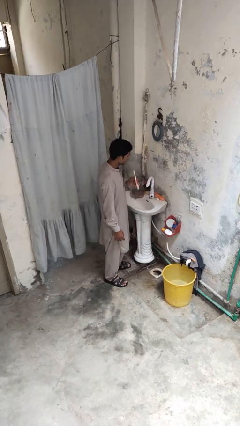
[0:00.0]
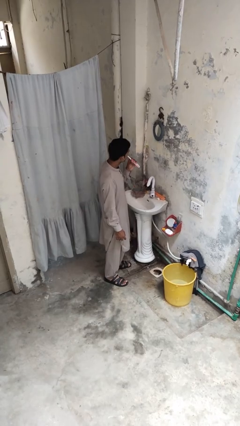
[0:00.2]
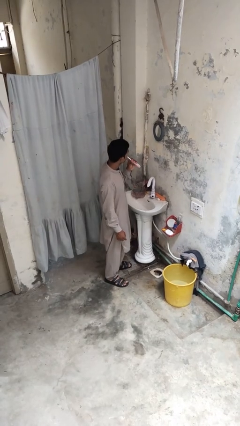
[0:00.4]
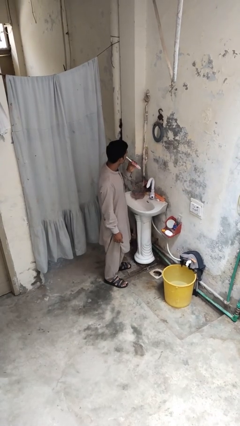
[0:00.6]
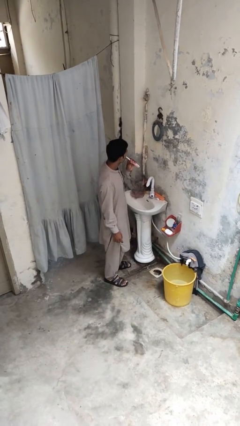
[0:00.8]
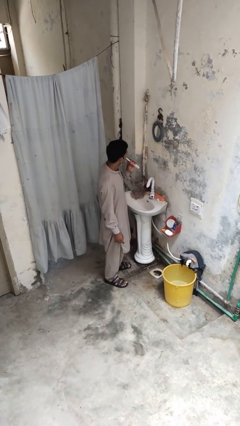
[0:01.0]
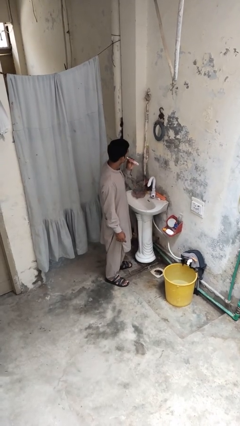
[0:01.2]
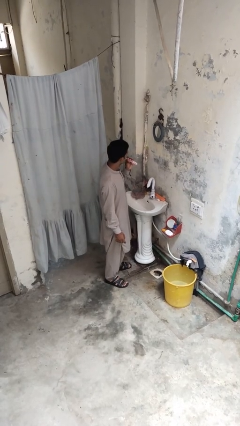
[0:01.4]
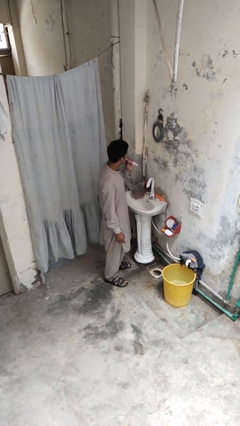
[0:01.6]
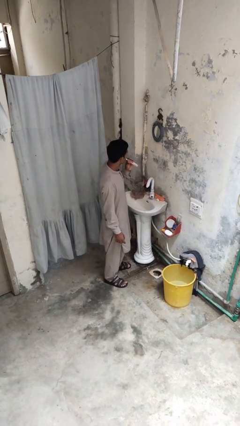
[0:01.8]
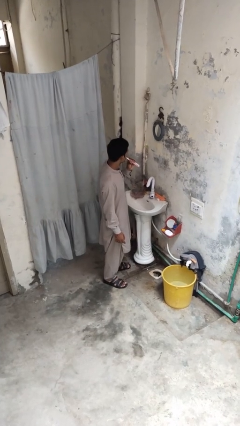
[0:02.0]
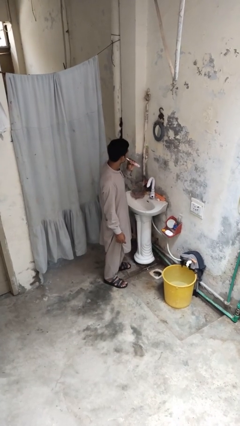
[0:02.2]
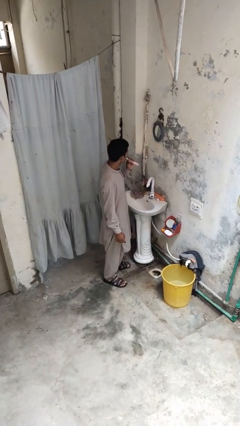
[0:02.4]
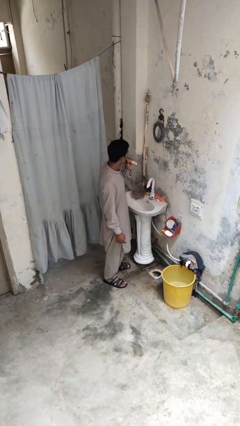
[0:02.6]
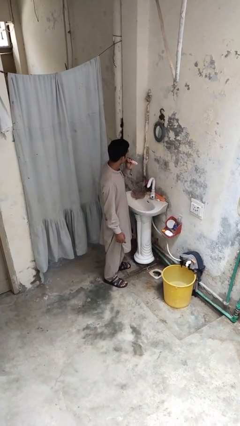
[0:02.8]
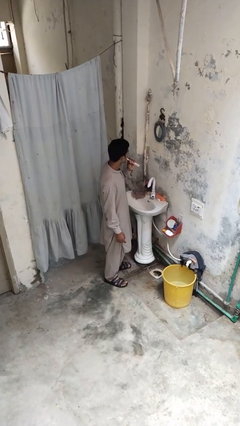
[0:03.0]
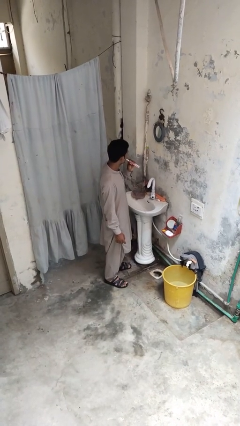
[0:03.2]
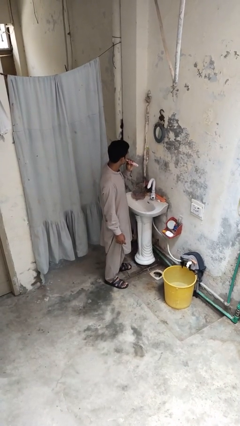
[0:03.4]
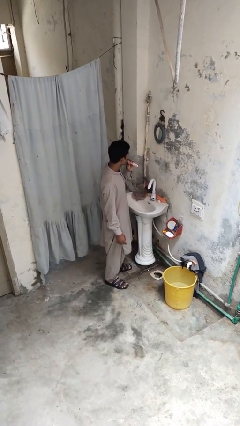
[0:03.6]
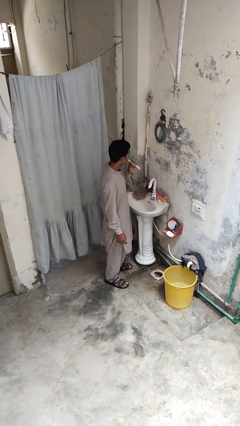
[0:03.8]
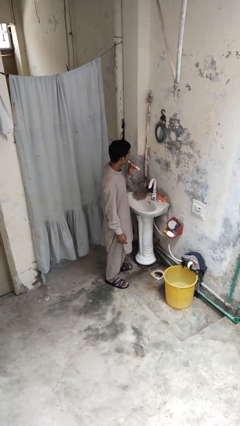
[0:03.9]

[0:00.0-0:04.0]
person brushes teeth

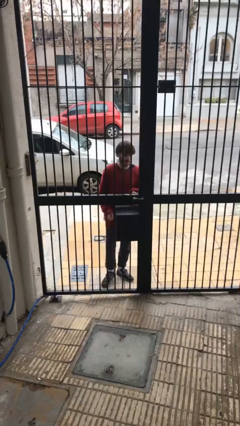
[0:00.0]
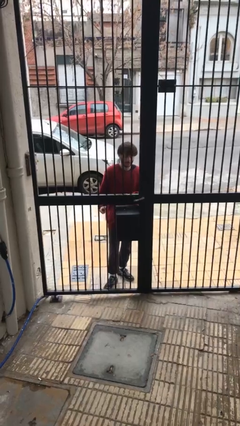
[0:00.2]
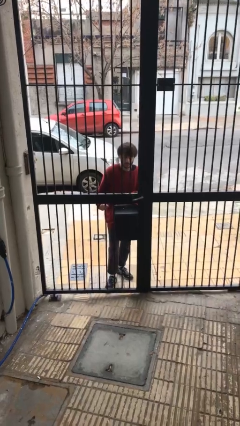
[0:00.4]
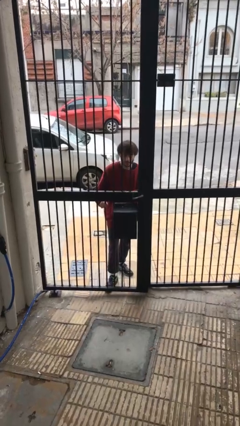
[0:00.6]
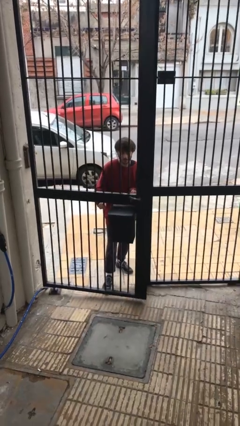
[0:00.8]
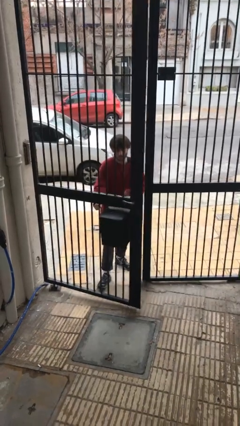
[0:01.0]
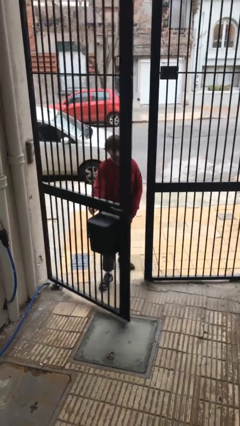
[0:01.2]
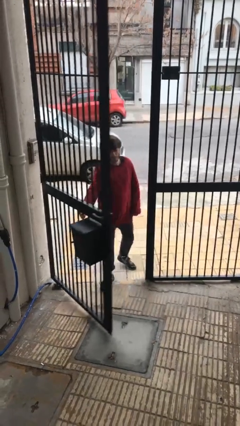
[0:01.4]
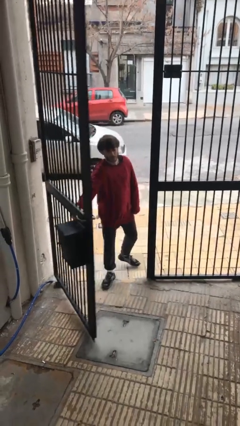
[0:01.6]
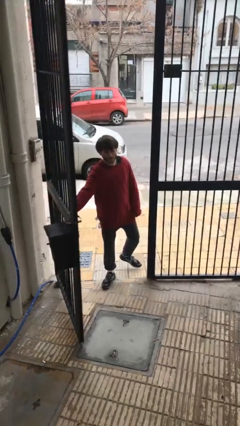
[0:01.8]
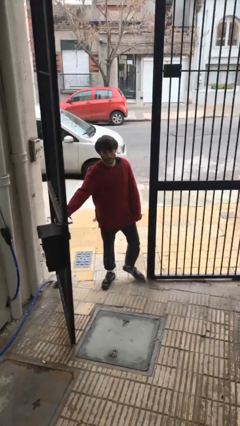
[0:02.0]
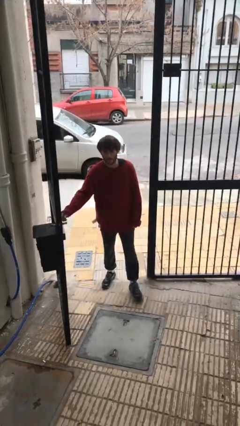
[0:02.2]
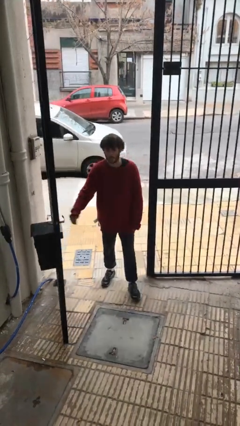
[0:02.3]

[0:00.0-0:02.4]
person opens gate

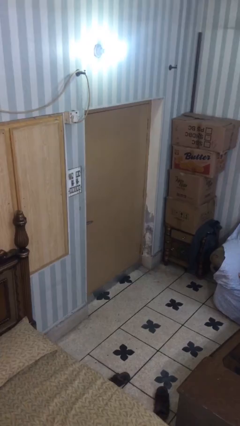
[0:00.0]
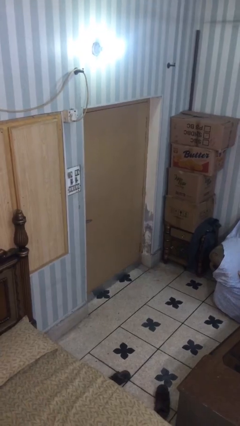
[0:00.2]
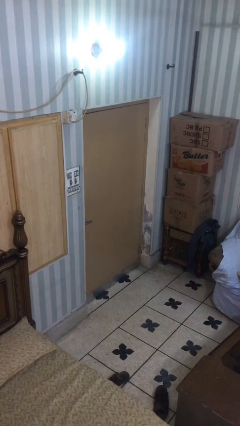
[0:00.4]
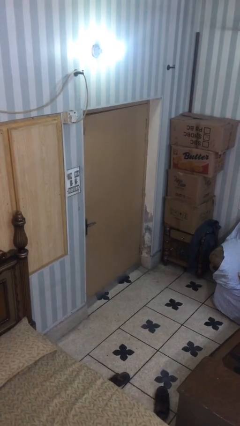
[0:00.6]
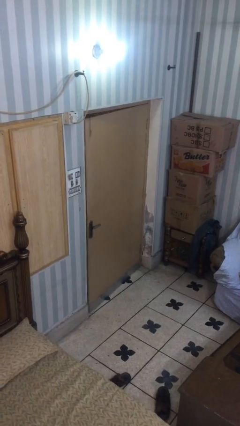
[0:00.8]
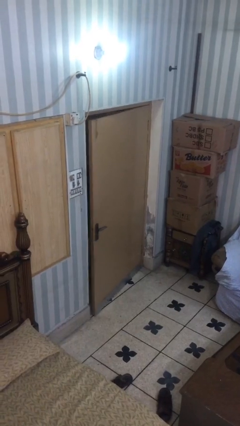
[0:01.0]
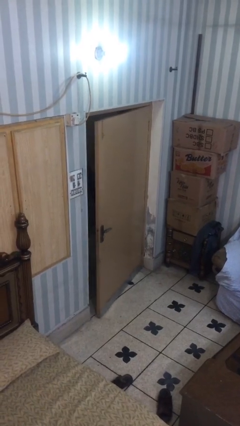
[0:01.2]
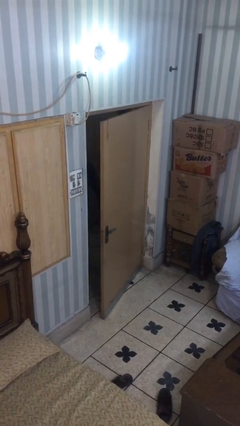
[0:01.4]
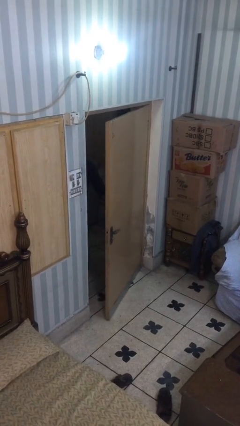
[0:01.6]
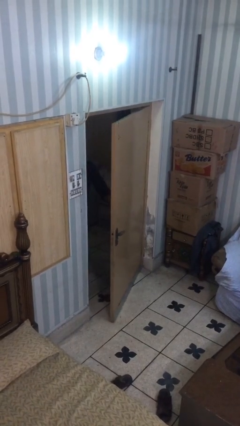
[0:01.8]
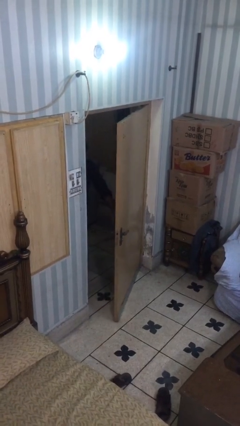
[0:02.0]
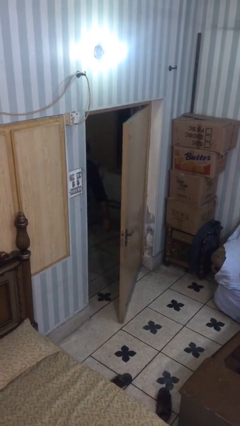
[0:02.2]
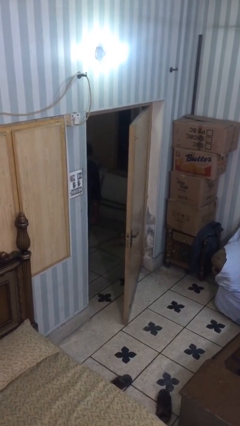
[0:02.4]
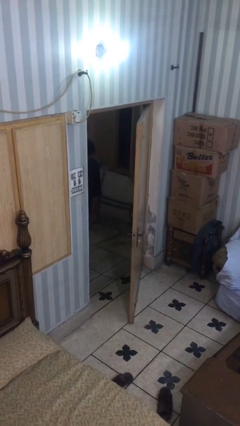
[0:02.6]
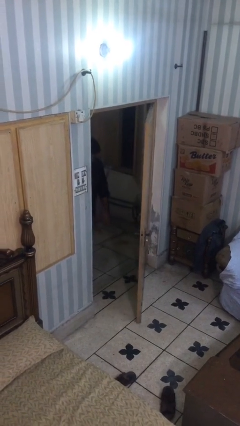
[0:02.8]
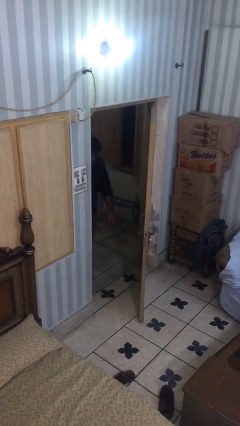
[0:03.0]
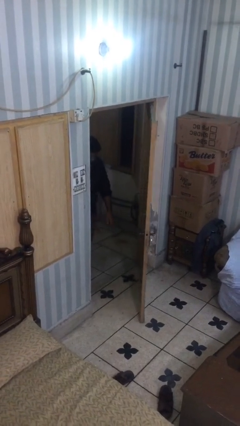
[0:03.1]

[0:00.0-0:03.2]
person opens facility door

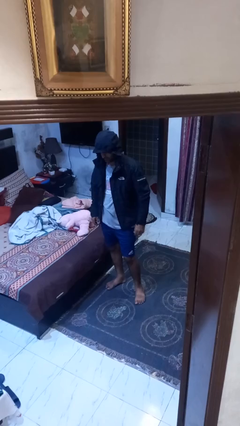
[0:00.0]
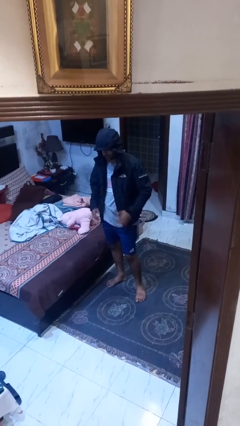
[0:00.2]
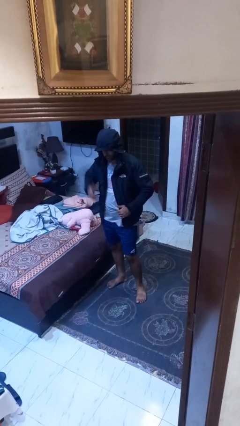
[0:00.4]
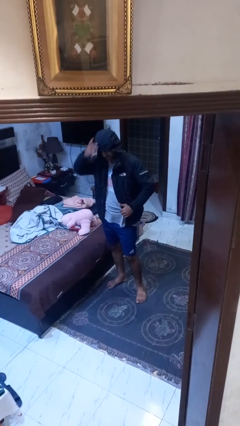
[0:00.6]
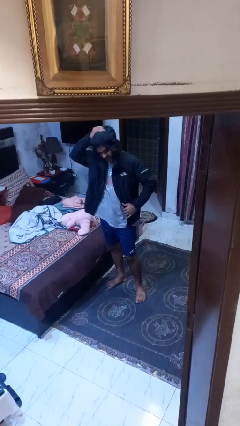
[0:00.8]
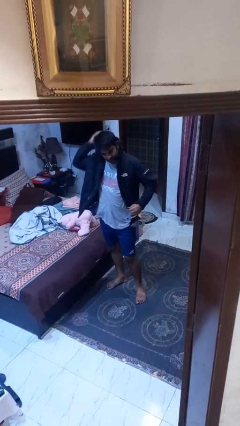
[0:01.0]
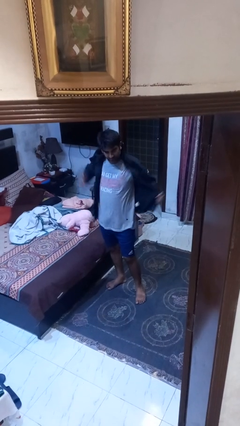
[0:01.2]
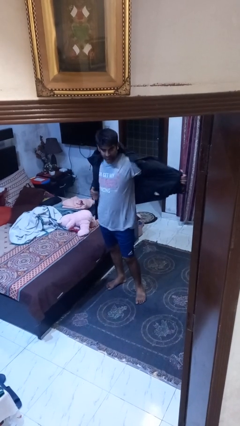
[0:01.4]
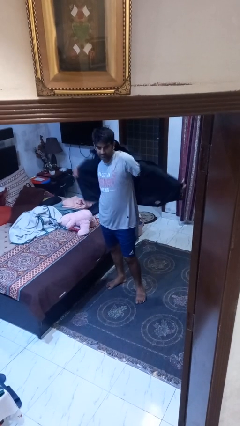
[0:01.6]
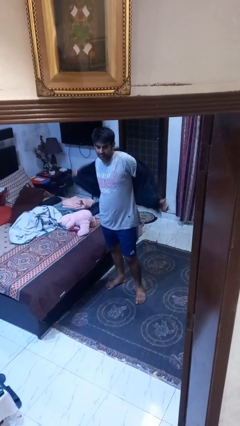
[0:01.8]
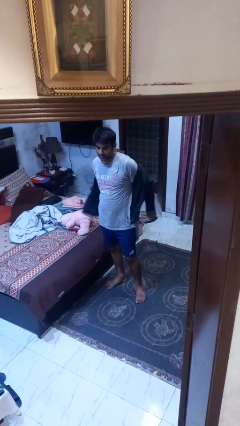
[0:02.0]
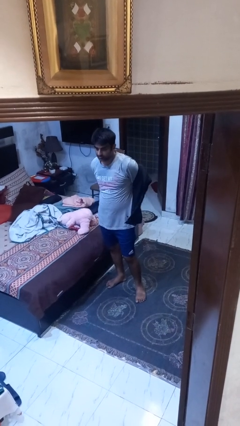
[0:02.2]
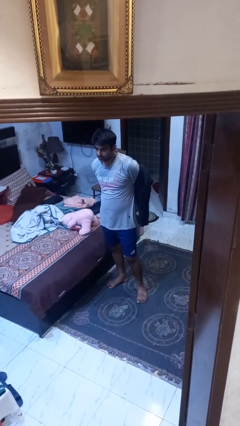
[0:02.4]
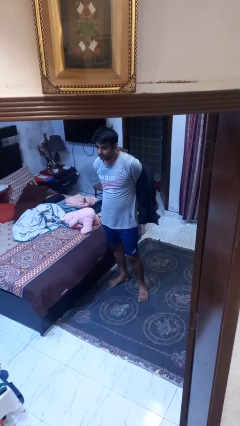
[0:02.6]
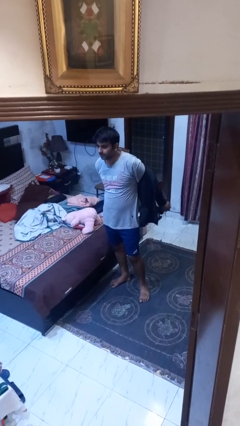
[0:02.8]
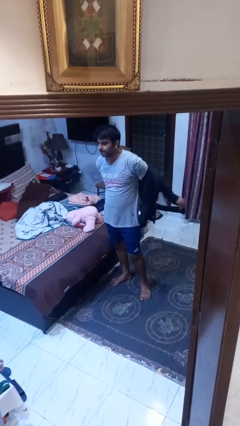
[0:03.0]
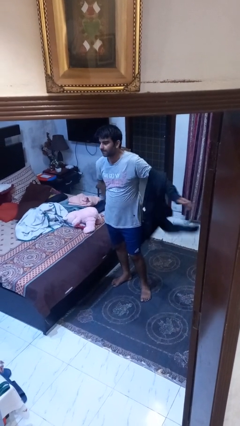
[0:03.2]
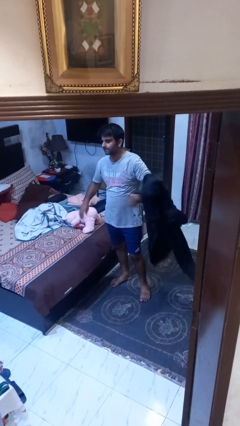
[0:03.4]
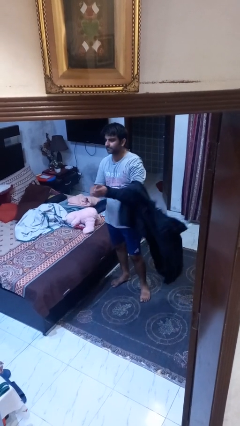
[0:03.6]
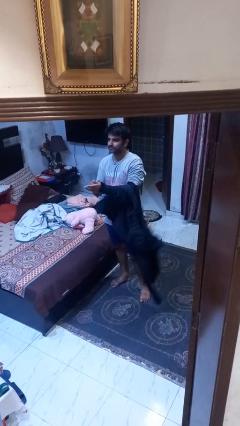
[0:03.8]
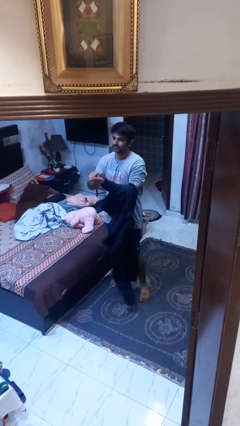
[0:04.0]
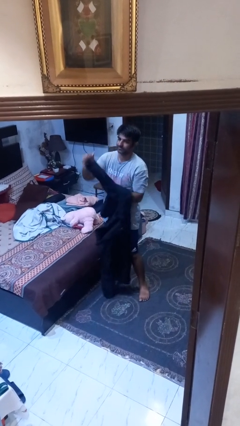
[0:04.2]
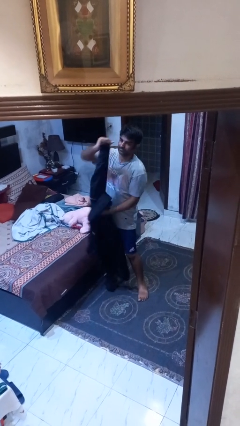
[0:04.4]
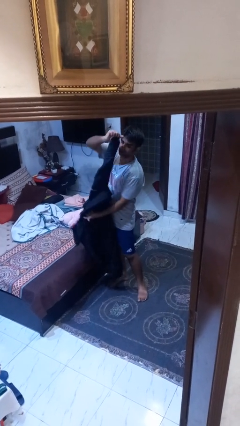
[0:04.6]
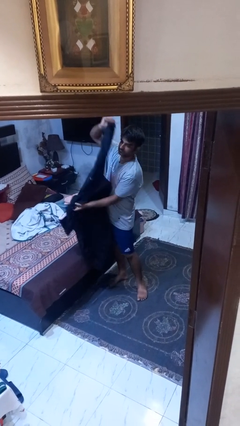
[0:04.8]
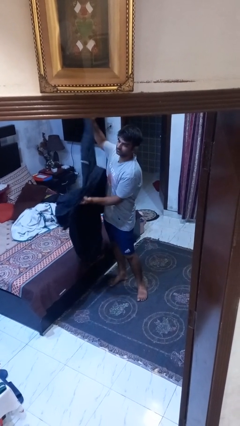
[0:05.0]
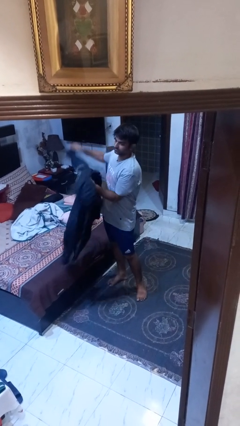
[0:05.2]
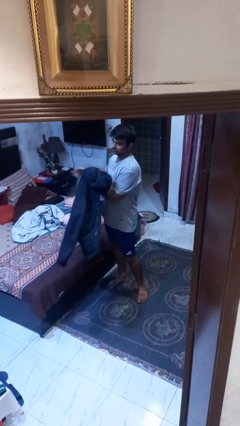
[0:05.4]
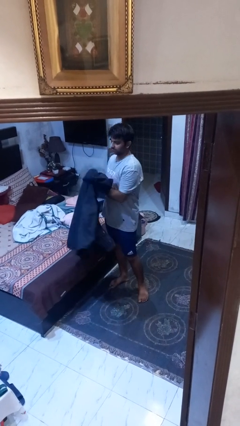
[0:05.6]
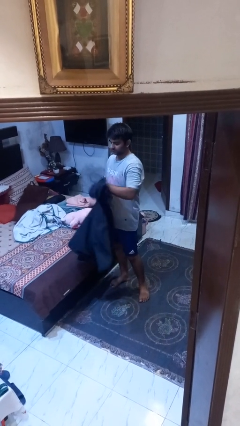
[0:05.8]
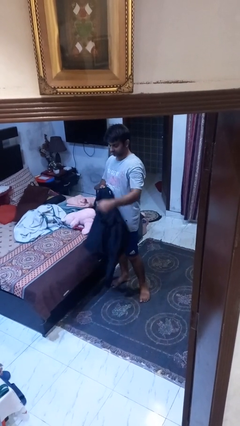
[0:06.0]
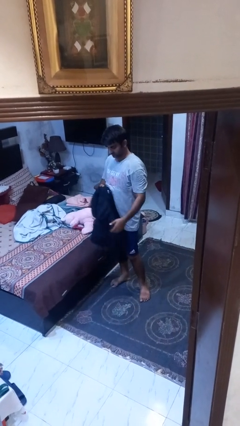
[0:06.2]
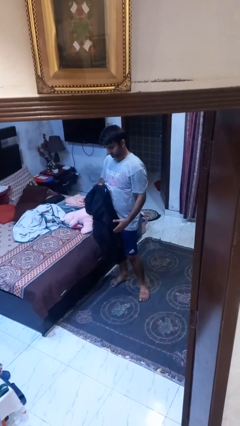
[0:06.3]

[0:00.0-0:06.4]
person takes off hoodie

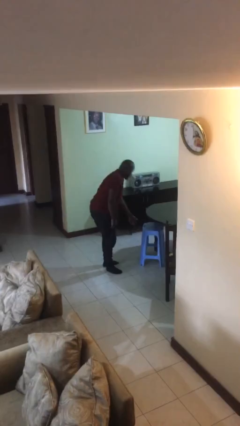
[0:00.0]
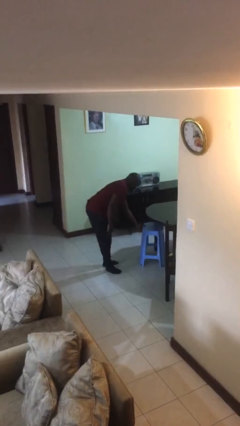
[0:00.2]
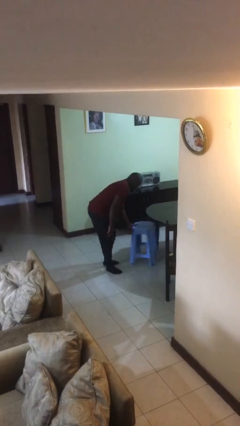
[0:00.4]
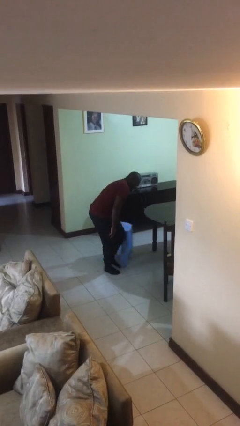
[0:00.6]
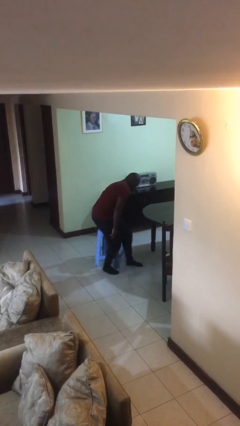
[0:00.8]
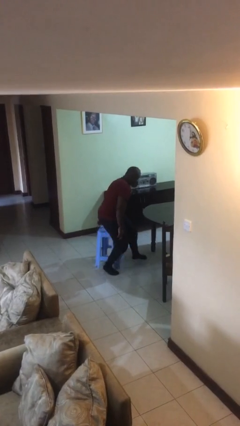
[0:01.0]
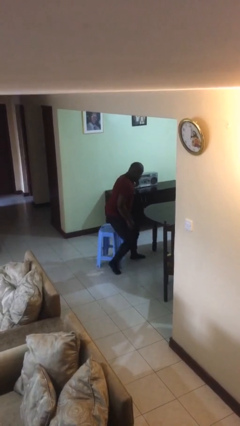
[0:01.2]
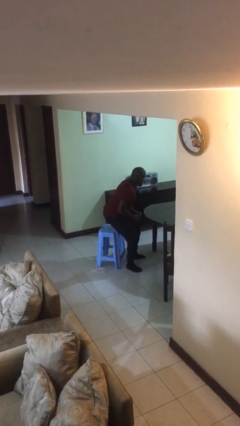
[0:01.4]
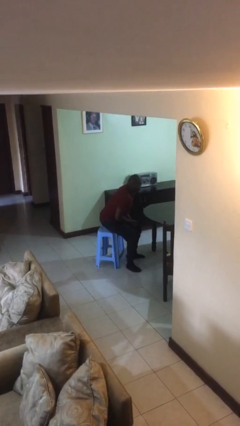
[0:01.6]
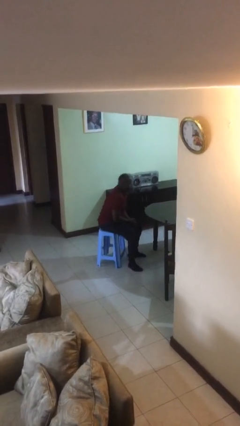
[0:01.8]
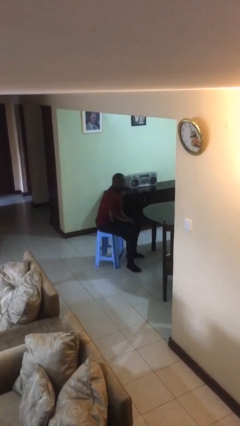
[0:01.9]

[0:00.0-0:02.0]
person sits down
